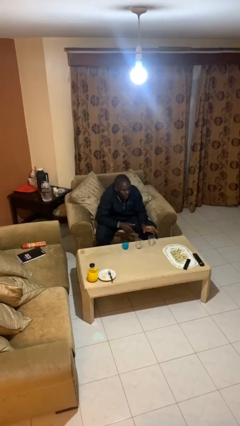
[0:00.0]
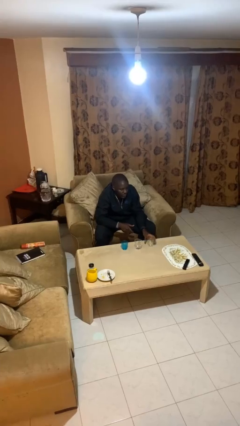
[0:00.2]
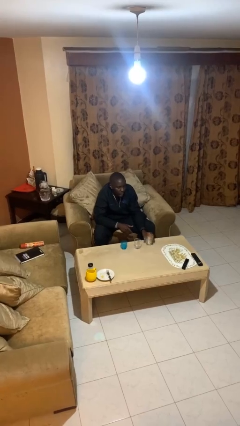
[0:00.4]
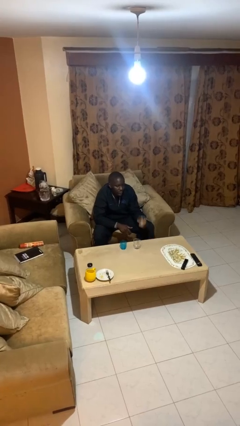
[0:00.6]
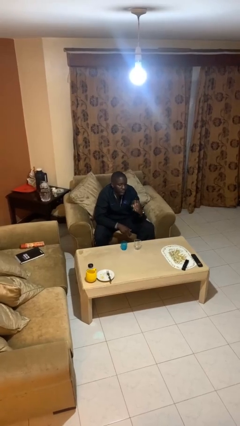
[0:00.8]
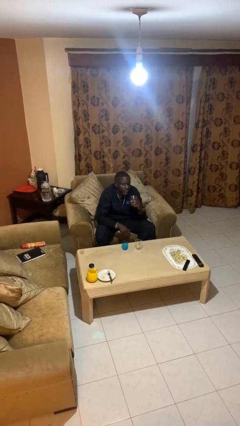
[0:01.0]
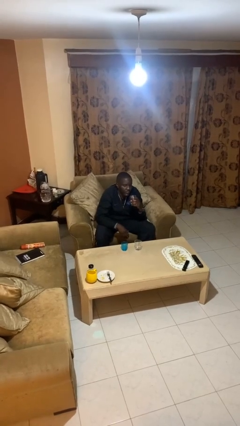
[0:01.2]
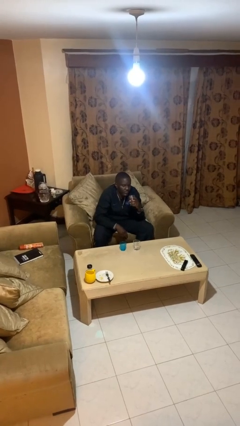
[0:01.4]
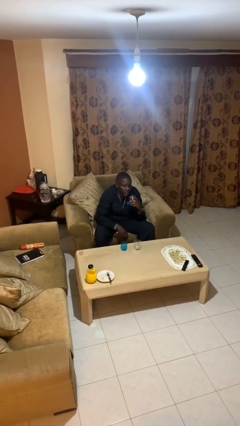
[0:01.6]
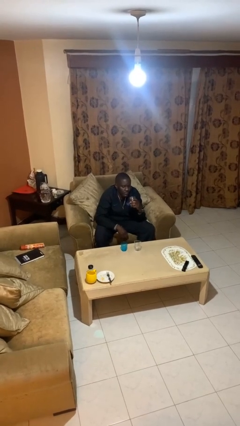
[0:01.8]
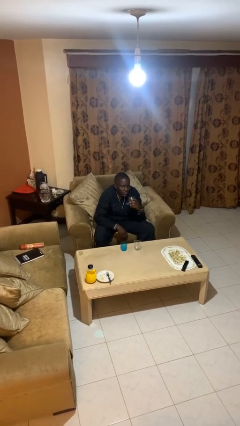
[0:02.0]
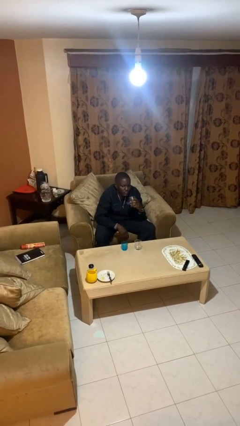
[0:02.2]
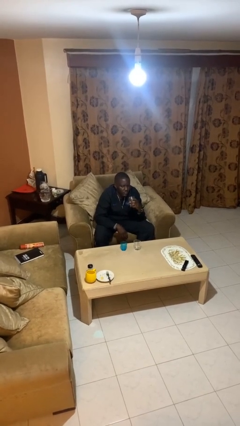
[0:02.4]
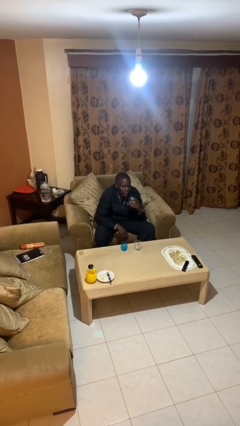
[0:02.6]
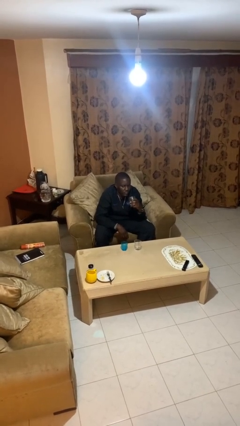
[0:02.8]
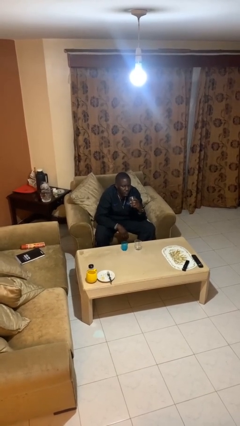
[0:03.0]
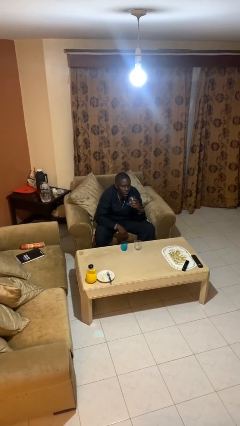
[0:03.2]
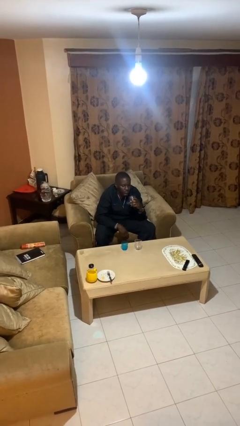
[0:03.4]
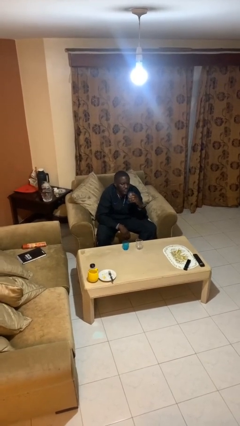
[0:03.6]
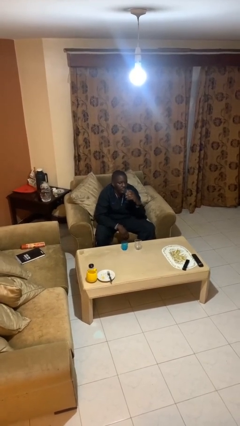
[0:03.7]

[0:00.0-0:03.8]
person picks up object from table

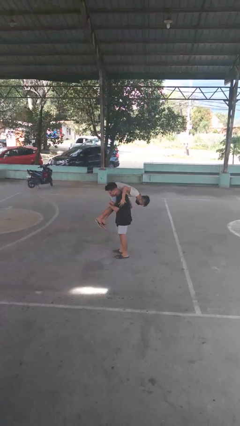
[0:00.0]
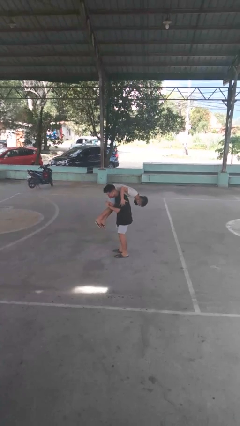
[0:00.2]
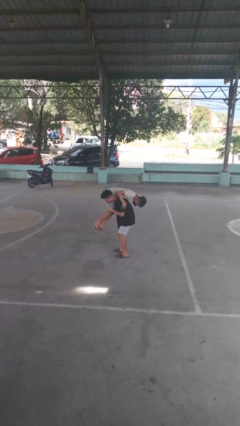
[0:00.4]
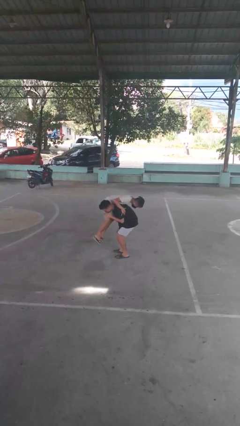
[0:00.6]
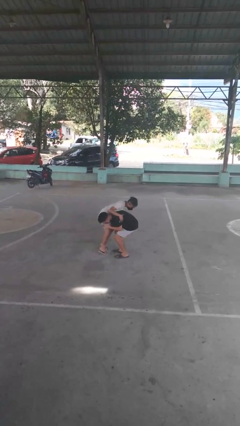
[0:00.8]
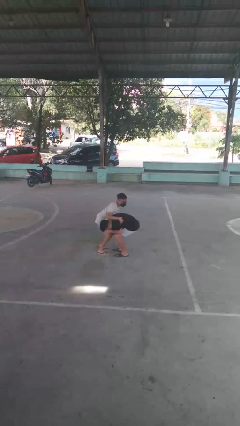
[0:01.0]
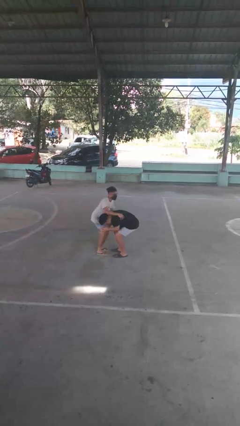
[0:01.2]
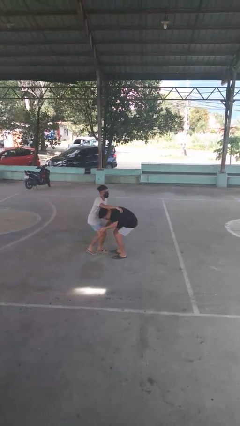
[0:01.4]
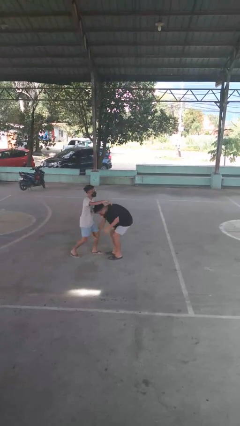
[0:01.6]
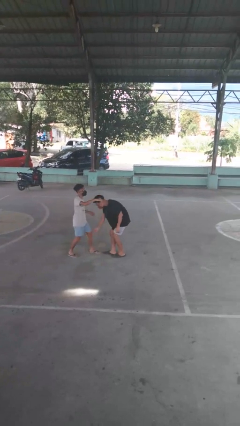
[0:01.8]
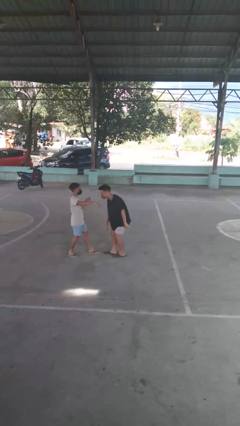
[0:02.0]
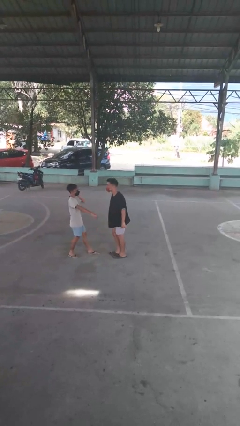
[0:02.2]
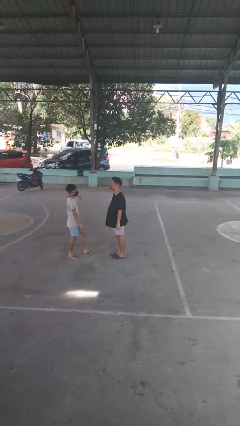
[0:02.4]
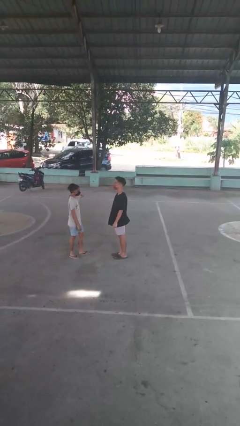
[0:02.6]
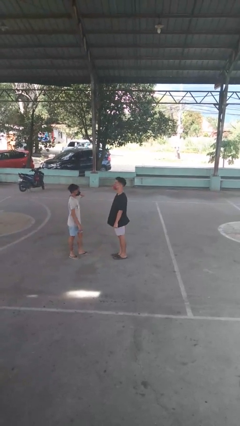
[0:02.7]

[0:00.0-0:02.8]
person puts down person

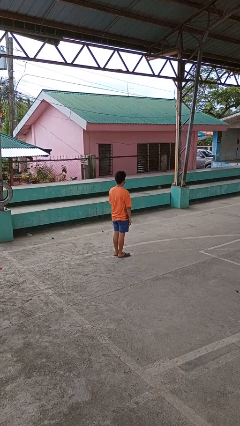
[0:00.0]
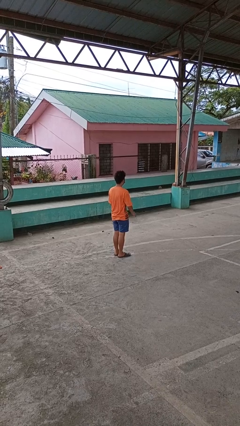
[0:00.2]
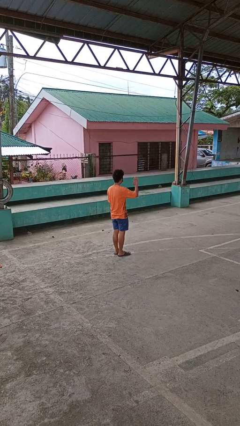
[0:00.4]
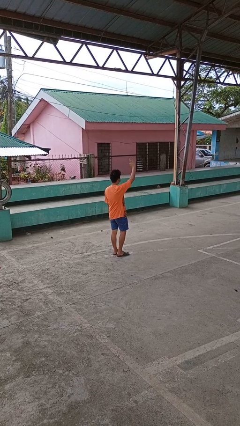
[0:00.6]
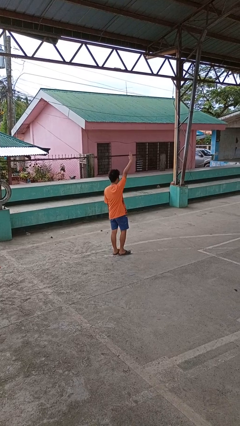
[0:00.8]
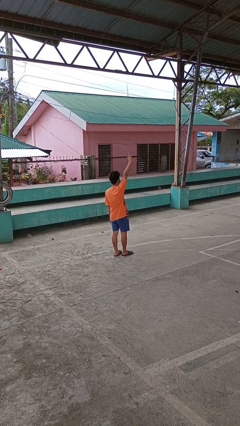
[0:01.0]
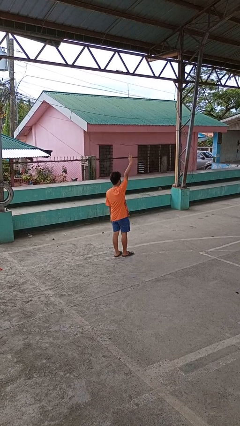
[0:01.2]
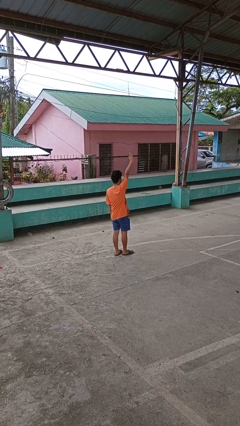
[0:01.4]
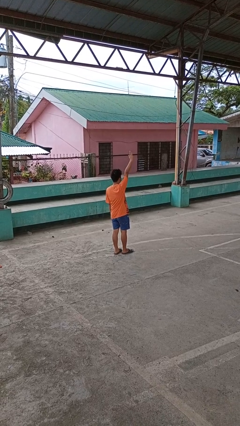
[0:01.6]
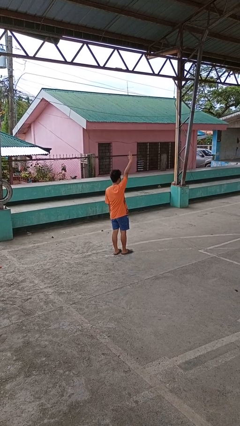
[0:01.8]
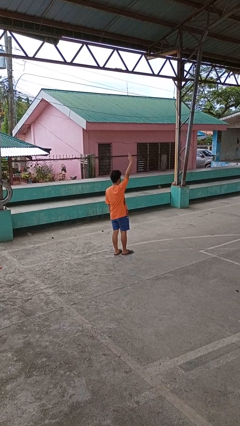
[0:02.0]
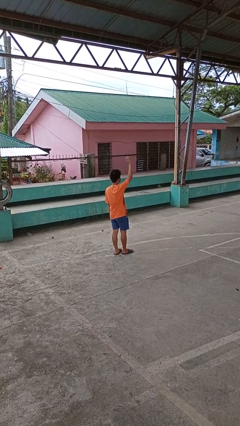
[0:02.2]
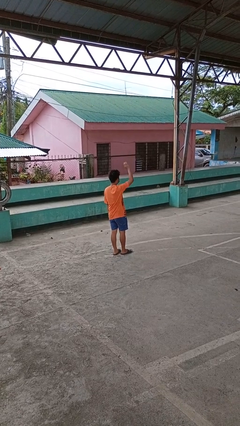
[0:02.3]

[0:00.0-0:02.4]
person gestures raise hand

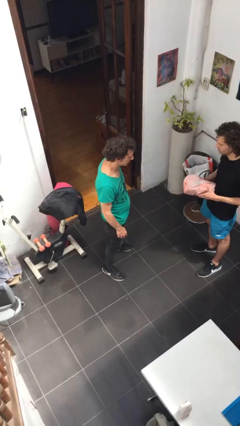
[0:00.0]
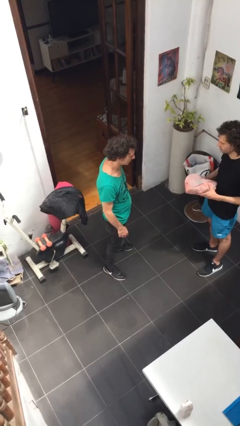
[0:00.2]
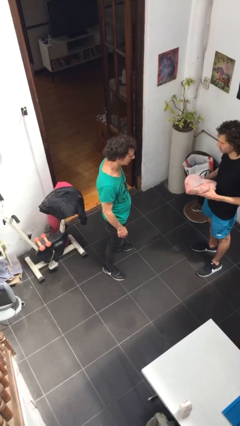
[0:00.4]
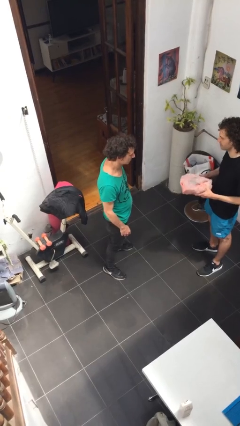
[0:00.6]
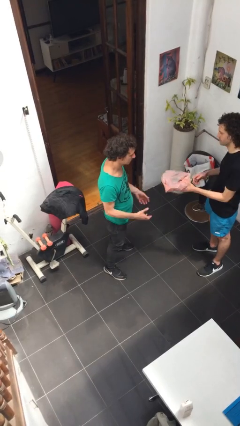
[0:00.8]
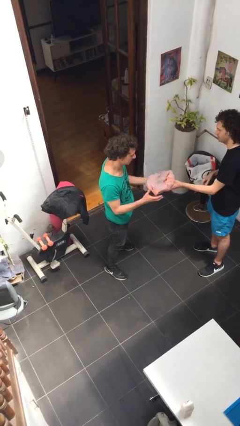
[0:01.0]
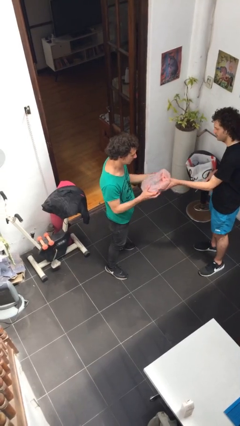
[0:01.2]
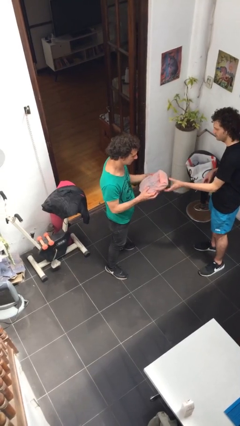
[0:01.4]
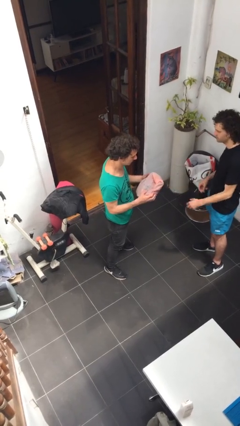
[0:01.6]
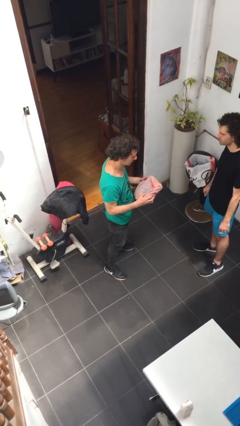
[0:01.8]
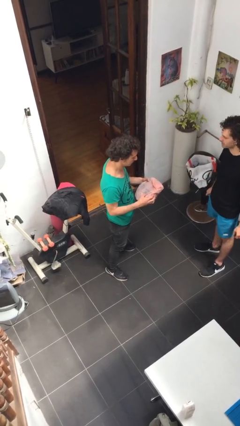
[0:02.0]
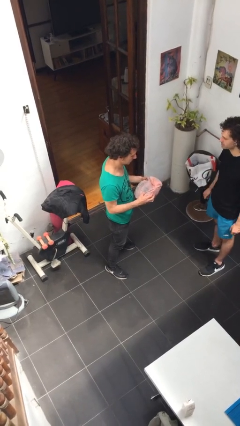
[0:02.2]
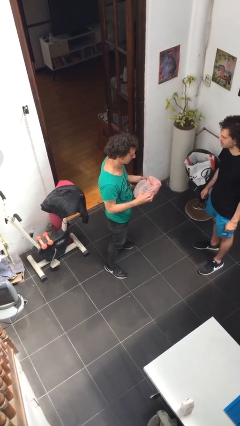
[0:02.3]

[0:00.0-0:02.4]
person transfers object to person

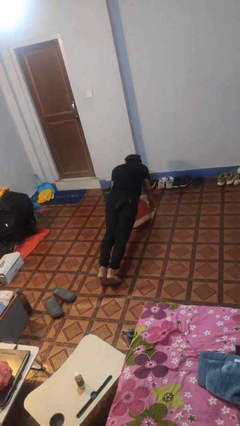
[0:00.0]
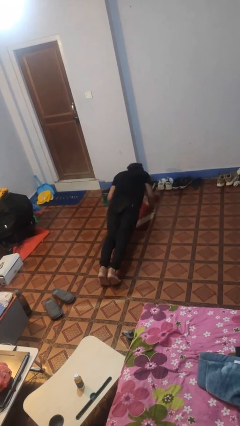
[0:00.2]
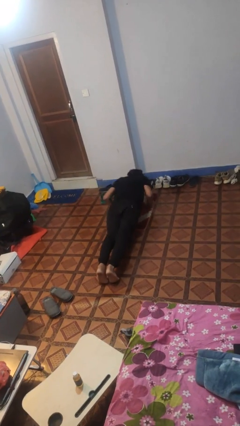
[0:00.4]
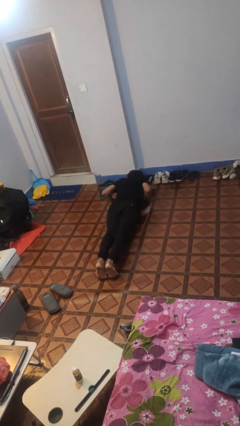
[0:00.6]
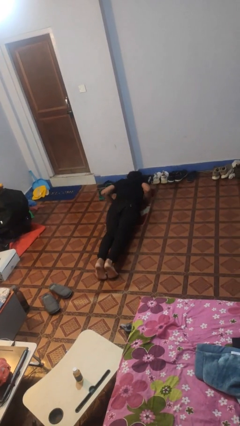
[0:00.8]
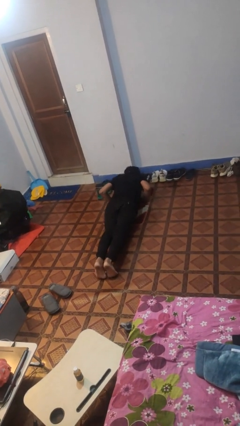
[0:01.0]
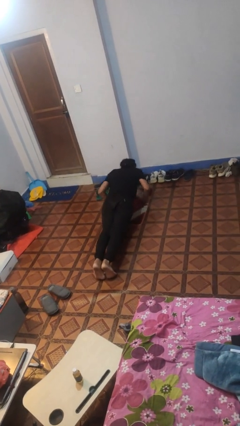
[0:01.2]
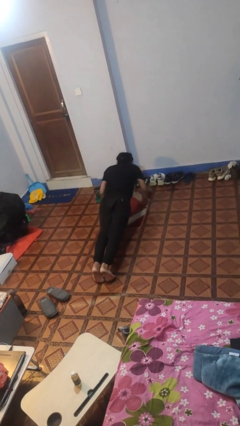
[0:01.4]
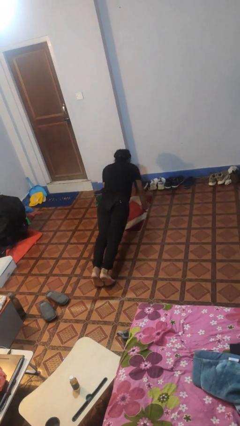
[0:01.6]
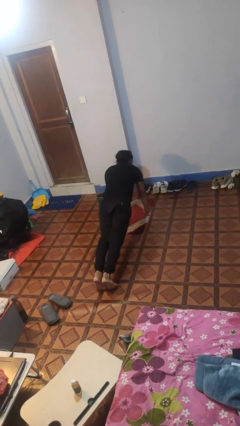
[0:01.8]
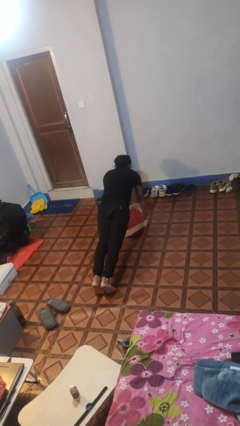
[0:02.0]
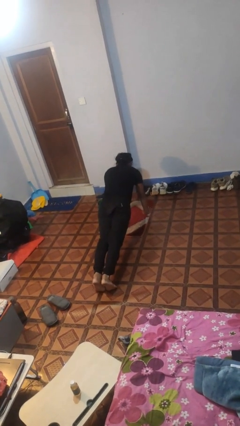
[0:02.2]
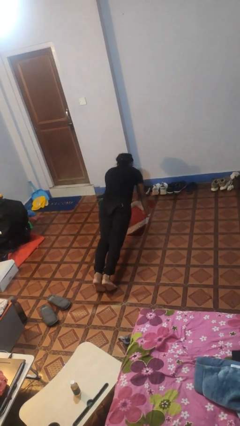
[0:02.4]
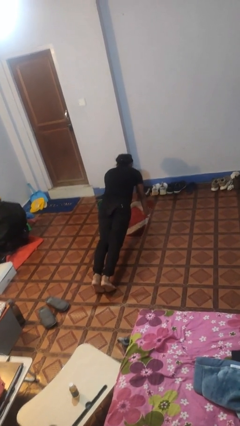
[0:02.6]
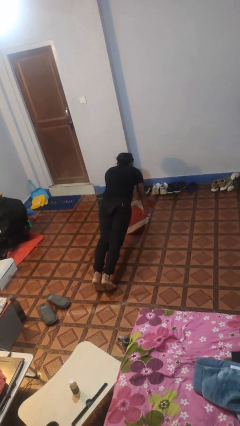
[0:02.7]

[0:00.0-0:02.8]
person exercises with pushup

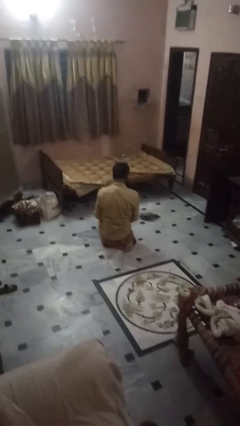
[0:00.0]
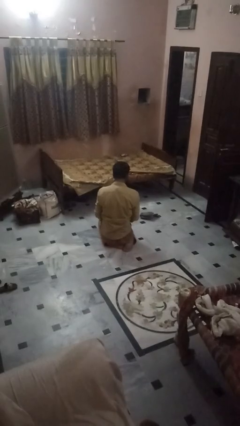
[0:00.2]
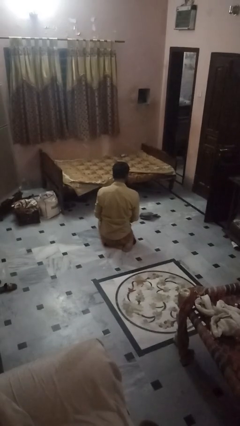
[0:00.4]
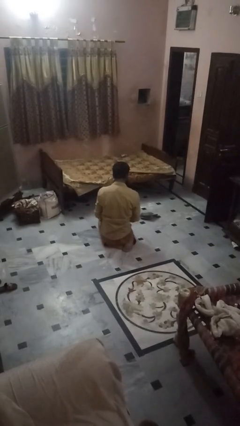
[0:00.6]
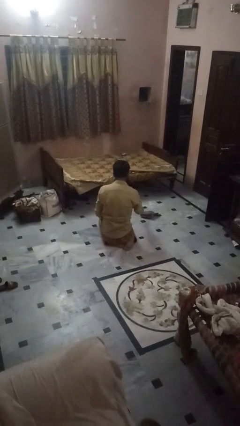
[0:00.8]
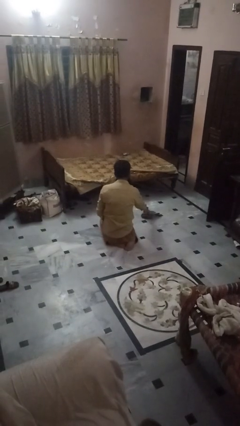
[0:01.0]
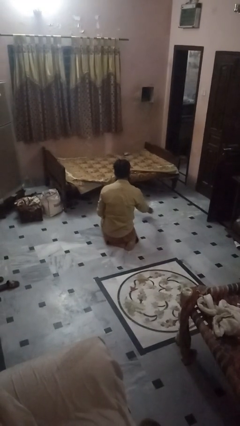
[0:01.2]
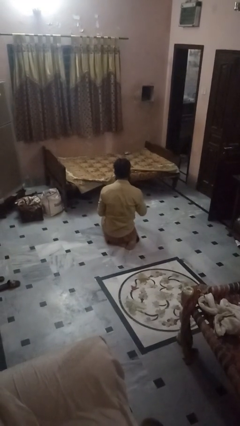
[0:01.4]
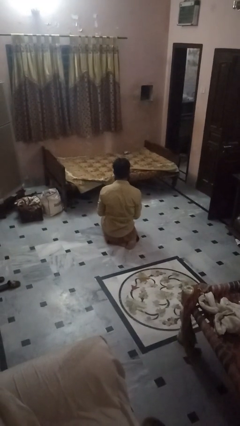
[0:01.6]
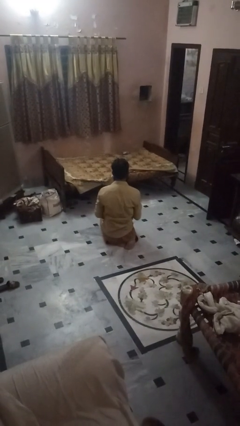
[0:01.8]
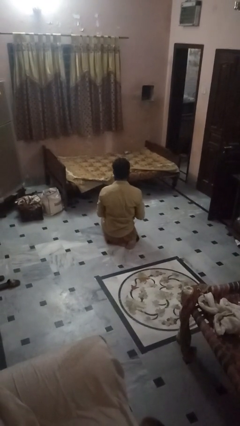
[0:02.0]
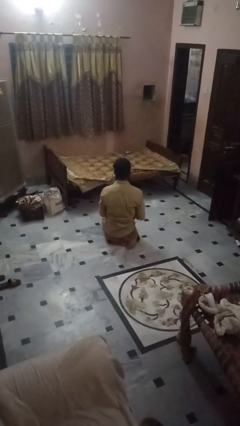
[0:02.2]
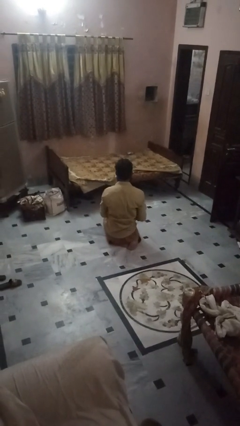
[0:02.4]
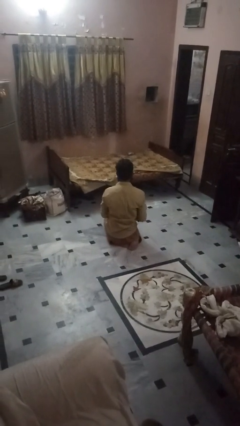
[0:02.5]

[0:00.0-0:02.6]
person picks up object from floor

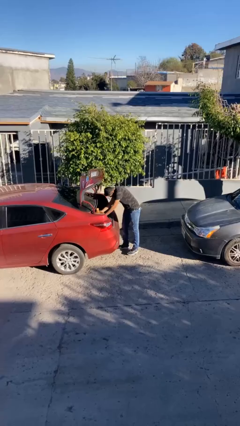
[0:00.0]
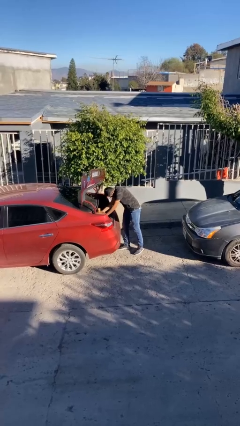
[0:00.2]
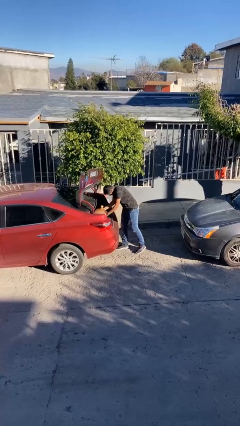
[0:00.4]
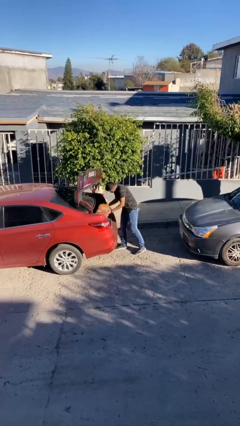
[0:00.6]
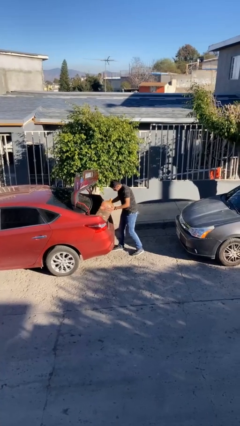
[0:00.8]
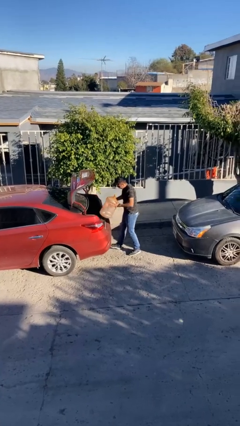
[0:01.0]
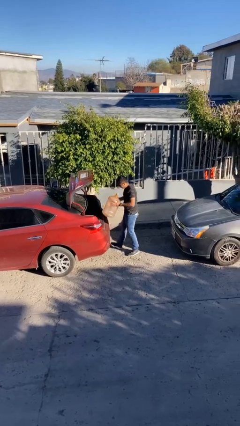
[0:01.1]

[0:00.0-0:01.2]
person unloads car
